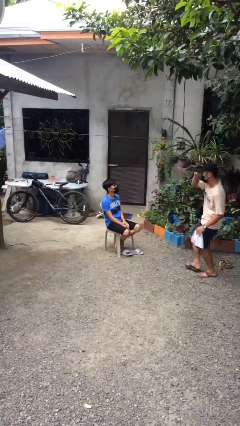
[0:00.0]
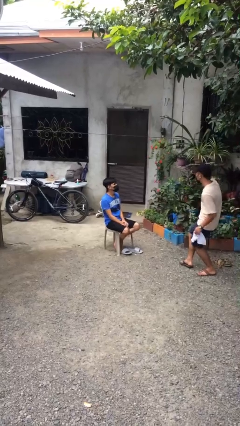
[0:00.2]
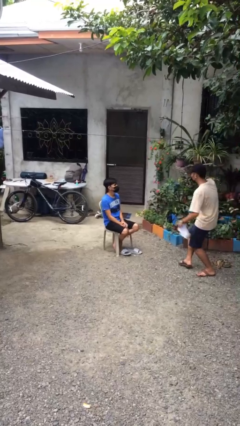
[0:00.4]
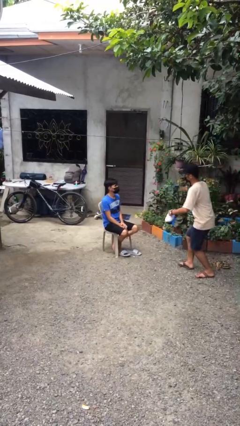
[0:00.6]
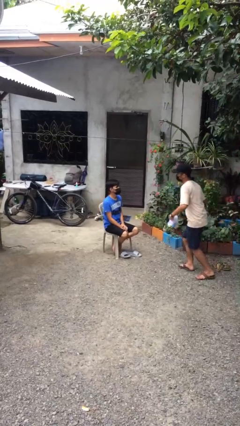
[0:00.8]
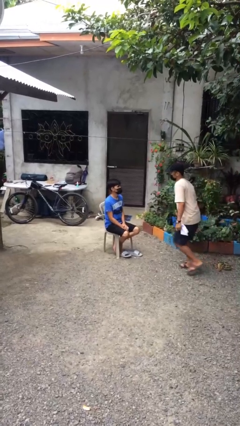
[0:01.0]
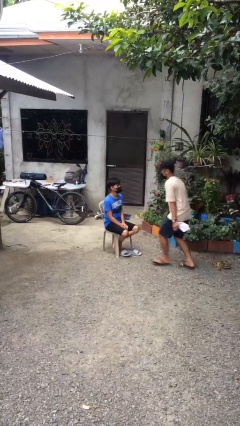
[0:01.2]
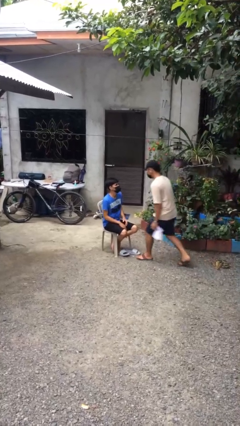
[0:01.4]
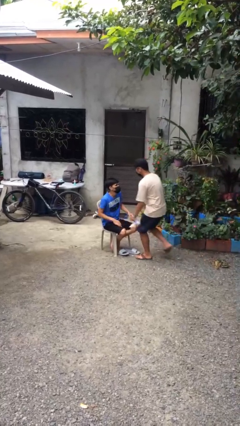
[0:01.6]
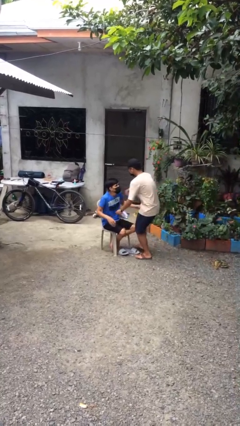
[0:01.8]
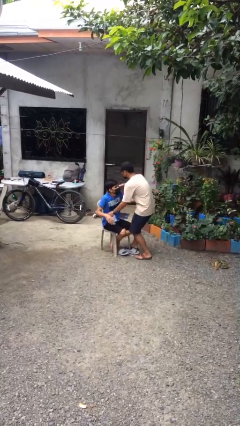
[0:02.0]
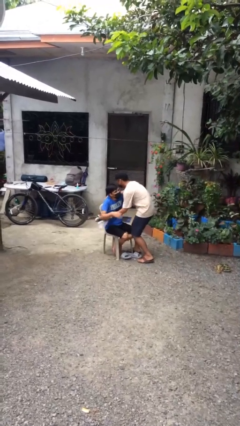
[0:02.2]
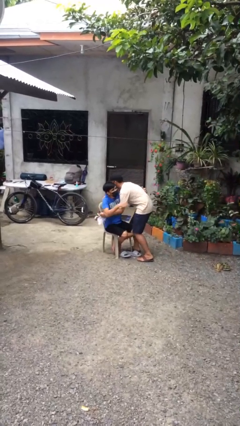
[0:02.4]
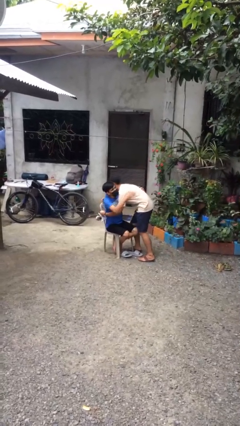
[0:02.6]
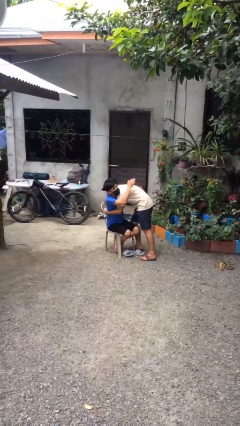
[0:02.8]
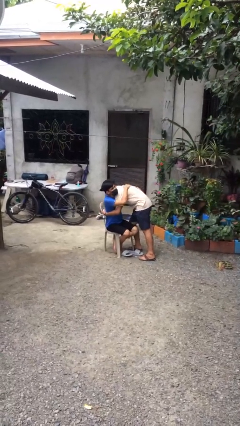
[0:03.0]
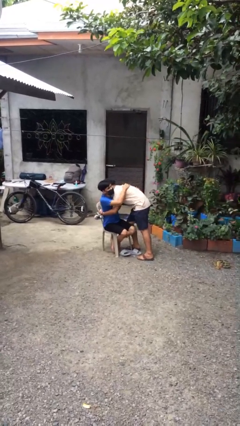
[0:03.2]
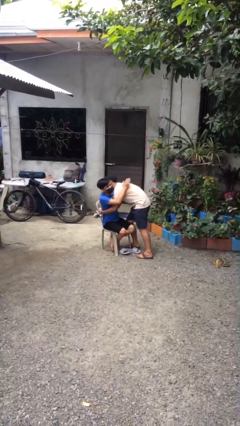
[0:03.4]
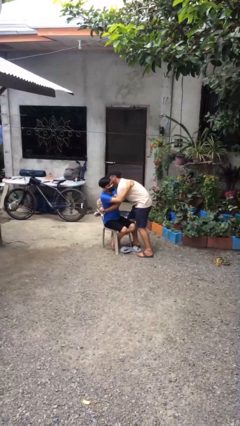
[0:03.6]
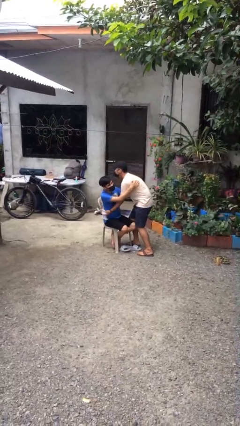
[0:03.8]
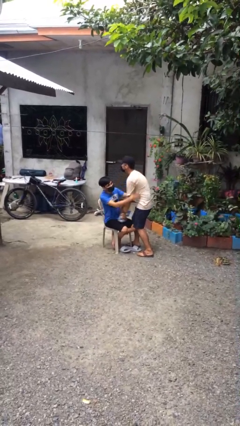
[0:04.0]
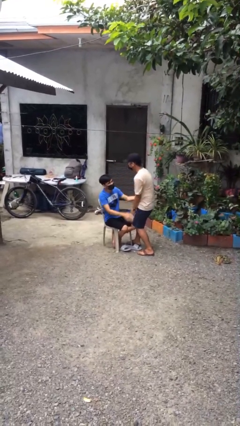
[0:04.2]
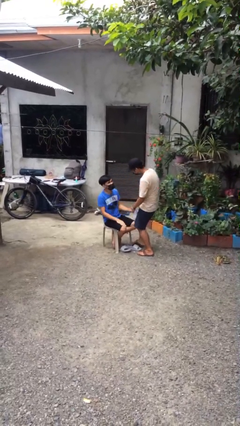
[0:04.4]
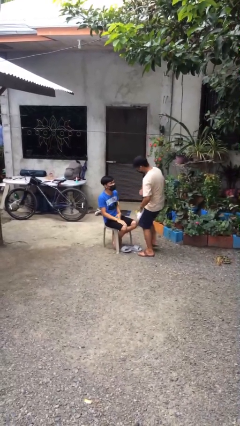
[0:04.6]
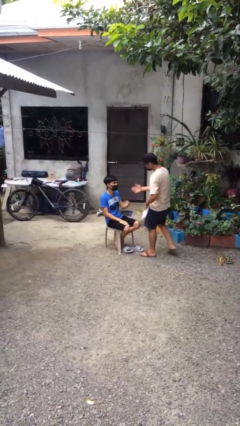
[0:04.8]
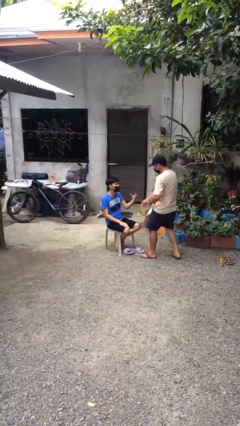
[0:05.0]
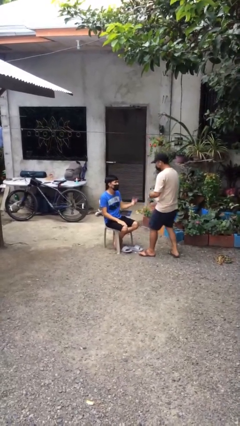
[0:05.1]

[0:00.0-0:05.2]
person embraces person

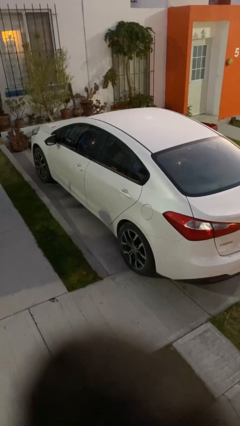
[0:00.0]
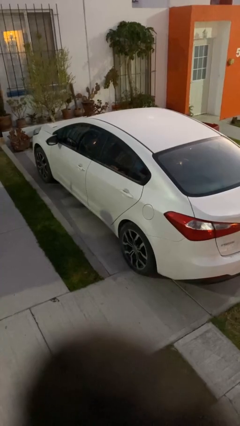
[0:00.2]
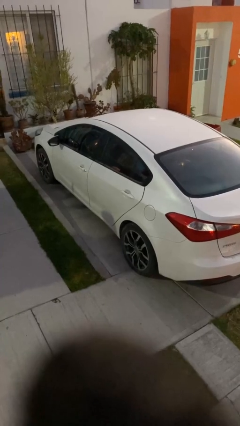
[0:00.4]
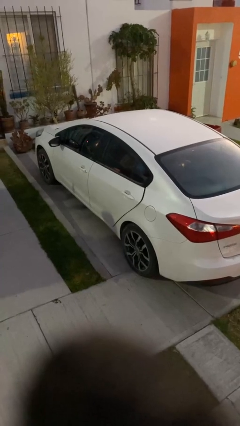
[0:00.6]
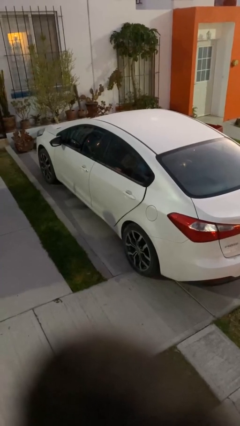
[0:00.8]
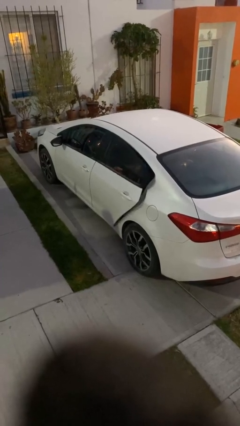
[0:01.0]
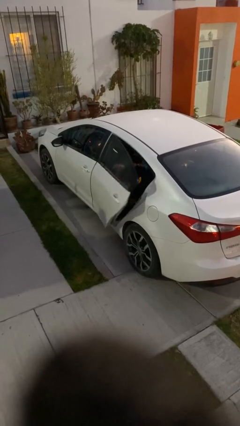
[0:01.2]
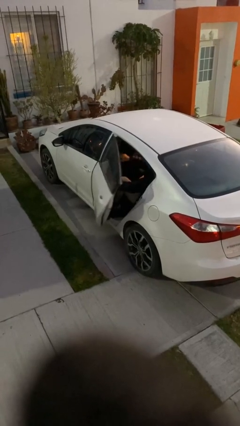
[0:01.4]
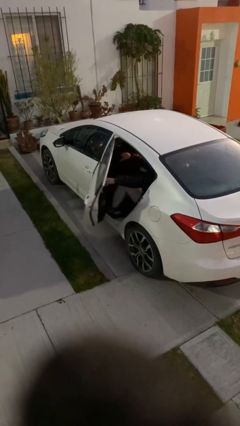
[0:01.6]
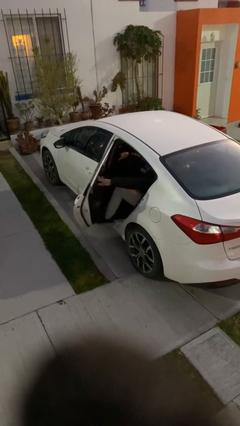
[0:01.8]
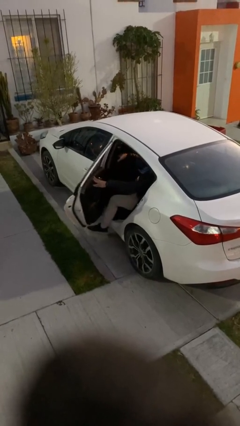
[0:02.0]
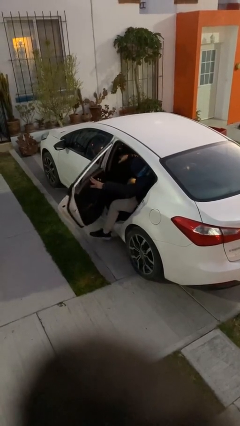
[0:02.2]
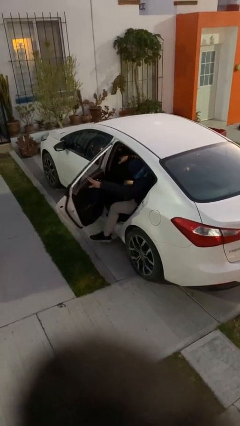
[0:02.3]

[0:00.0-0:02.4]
person opens car door

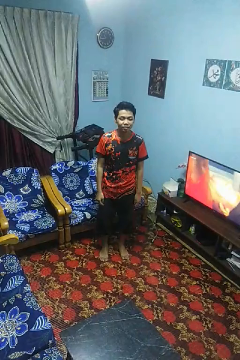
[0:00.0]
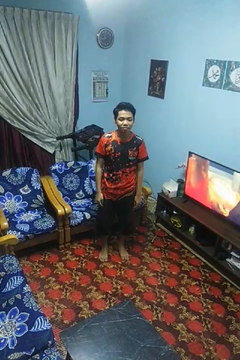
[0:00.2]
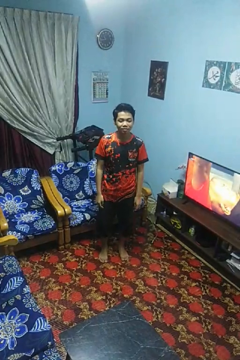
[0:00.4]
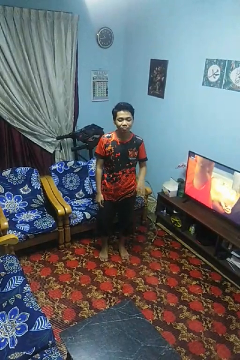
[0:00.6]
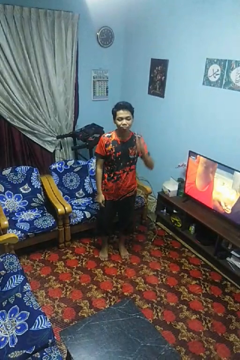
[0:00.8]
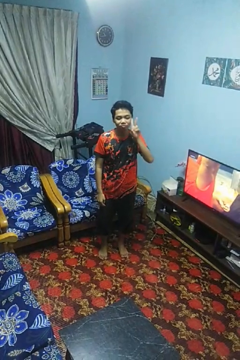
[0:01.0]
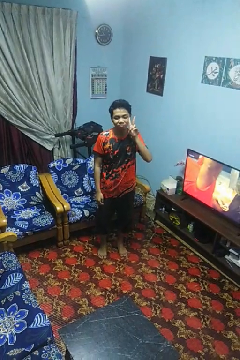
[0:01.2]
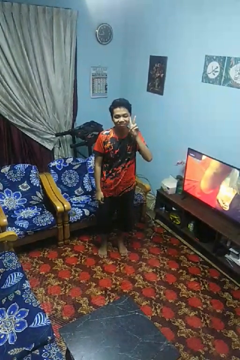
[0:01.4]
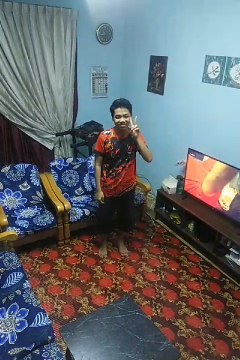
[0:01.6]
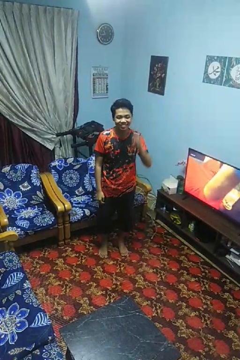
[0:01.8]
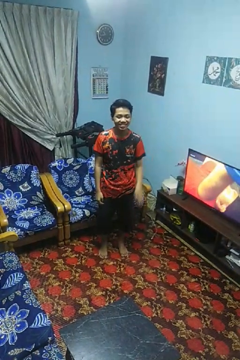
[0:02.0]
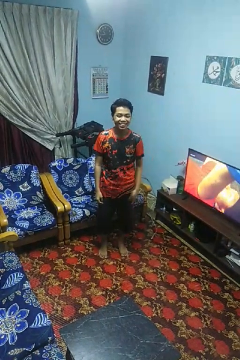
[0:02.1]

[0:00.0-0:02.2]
person gestures peace

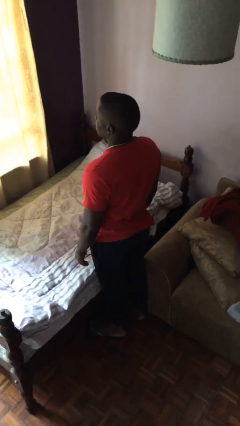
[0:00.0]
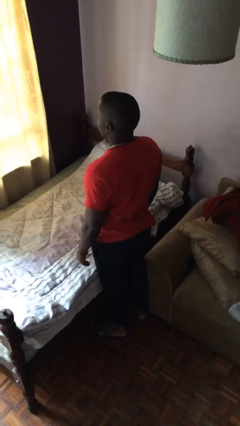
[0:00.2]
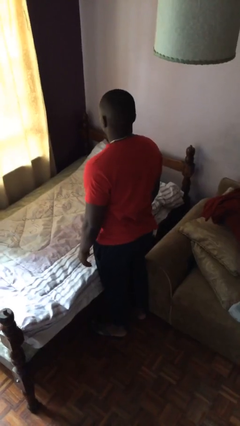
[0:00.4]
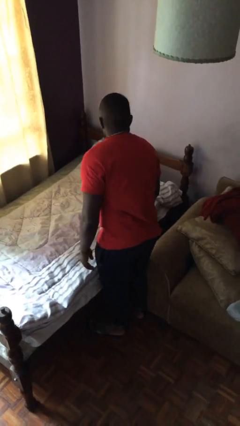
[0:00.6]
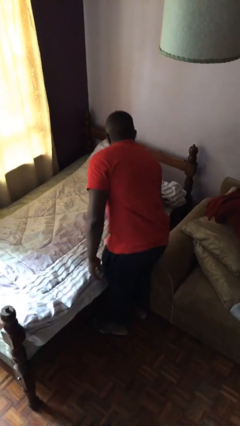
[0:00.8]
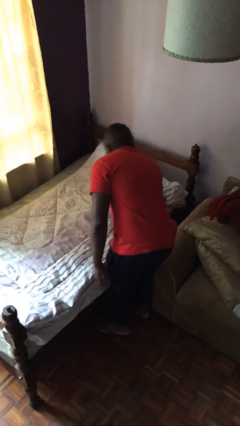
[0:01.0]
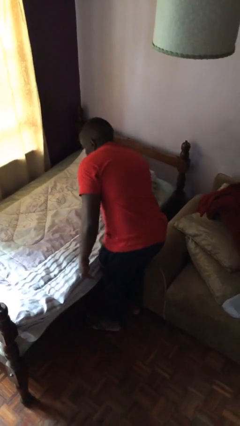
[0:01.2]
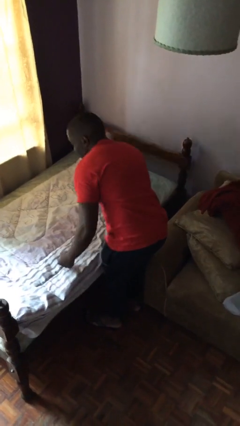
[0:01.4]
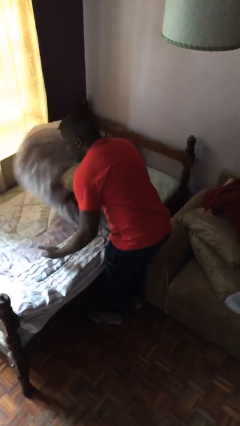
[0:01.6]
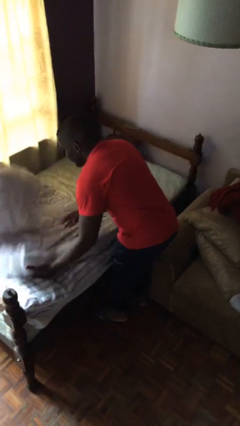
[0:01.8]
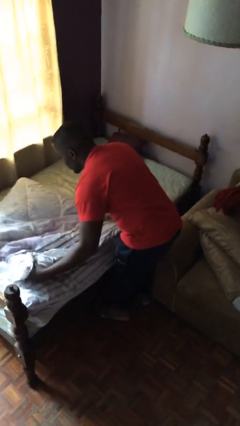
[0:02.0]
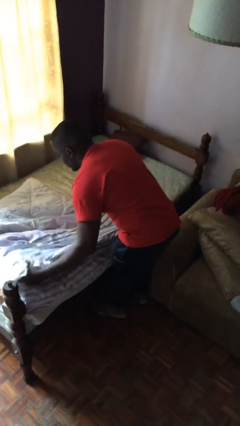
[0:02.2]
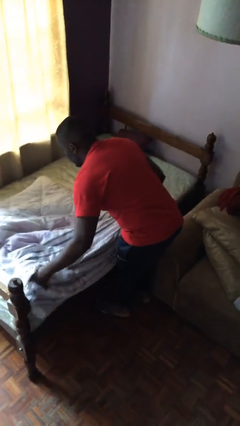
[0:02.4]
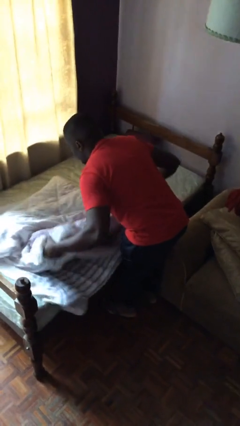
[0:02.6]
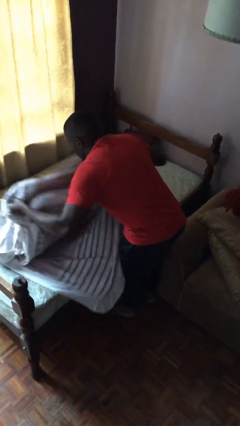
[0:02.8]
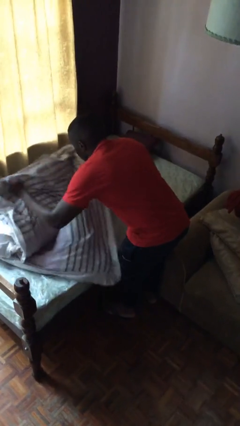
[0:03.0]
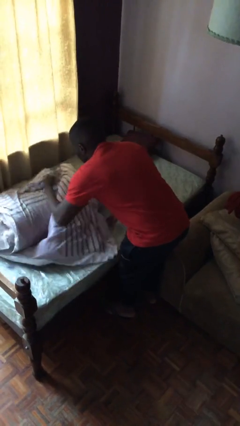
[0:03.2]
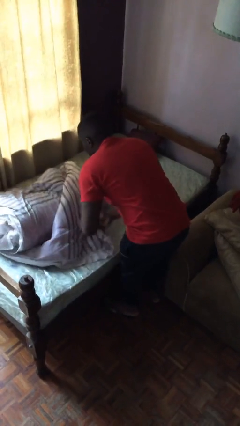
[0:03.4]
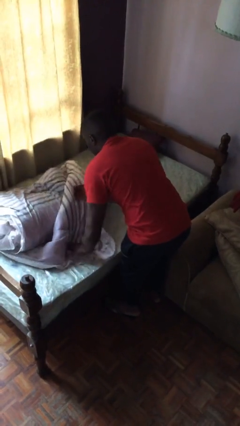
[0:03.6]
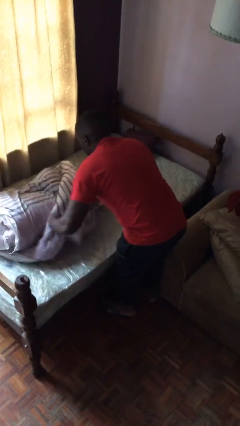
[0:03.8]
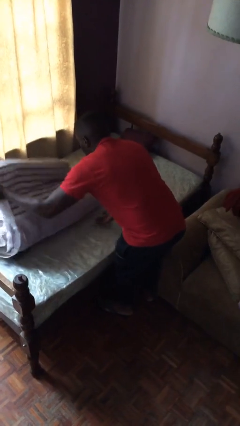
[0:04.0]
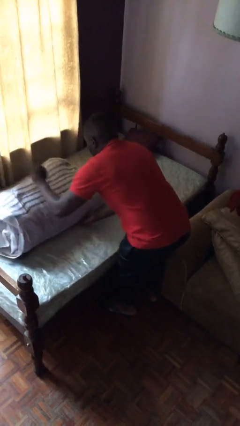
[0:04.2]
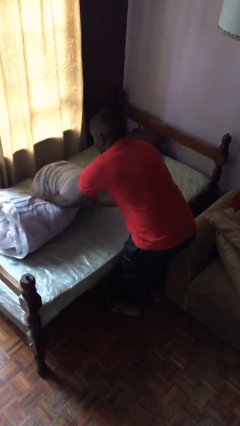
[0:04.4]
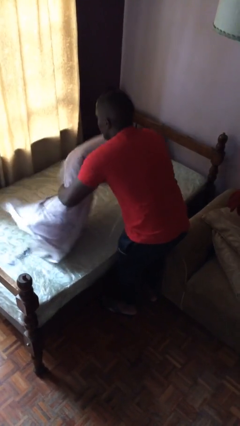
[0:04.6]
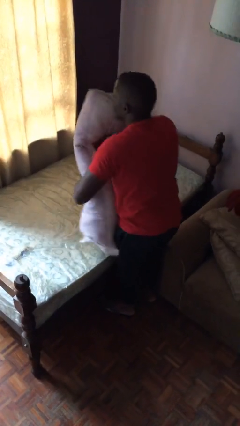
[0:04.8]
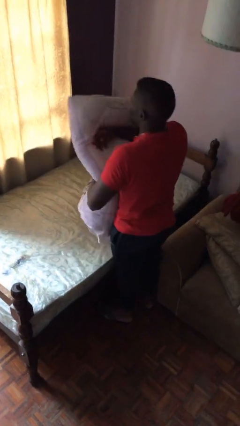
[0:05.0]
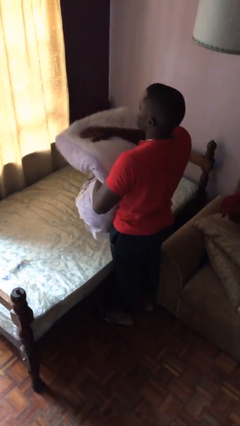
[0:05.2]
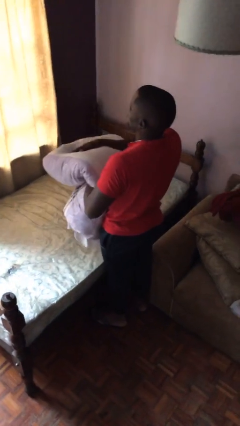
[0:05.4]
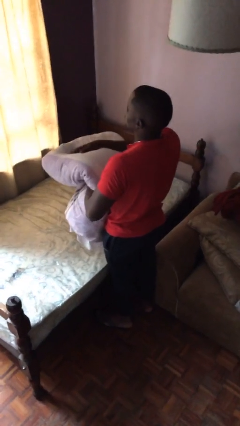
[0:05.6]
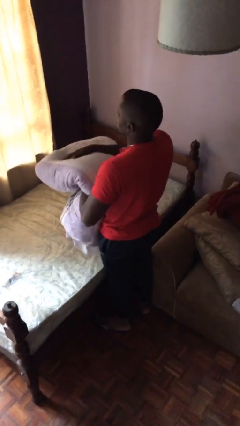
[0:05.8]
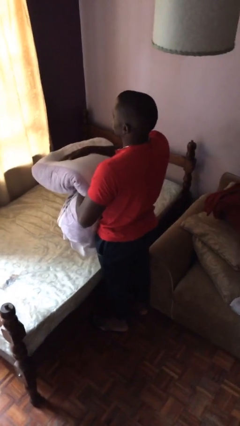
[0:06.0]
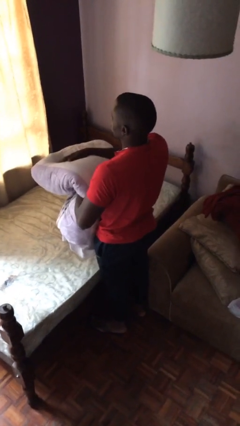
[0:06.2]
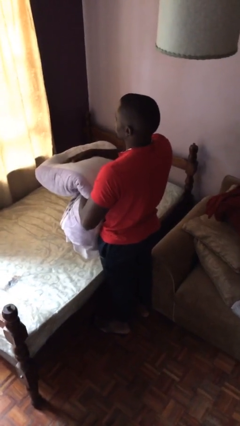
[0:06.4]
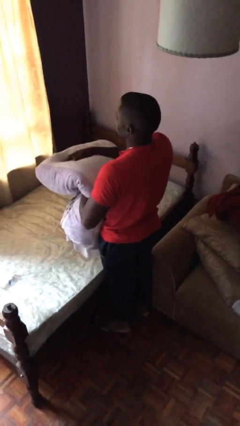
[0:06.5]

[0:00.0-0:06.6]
person folds blanket

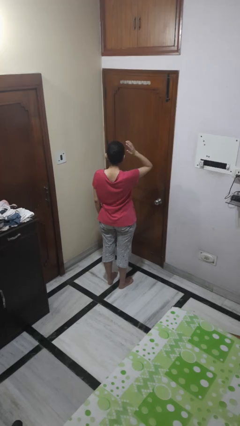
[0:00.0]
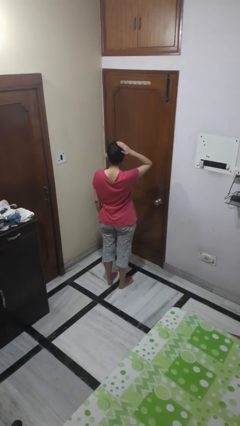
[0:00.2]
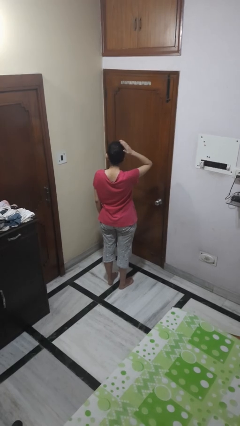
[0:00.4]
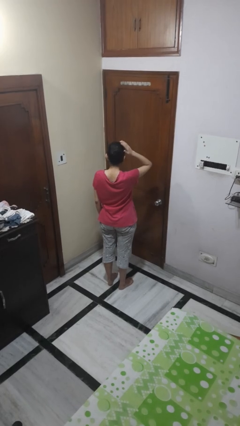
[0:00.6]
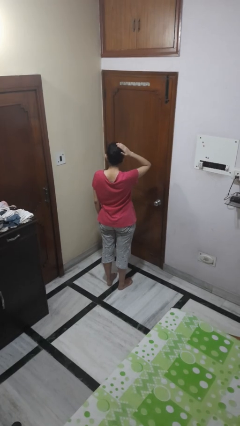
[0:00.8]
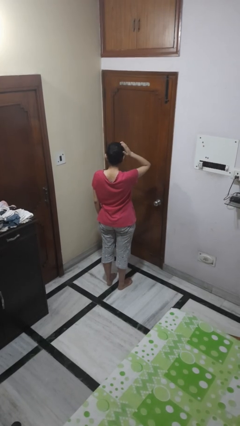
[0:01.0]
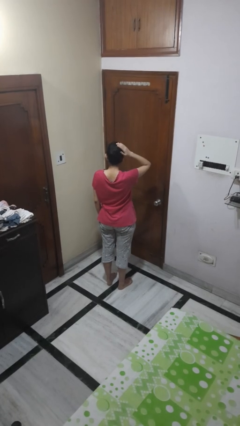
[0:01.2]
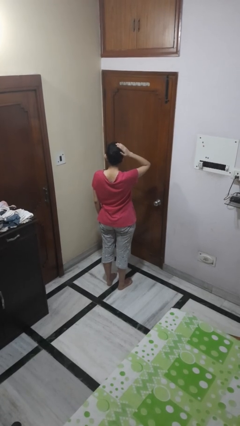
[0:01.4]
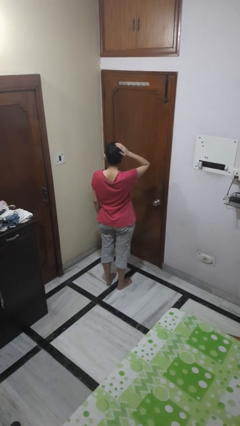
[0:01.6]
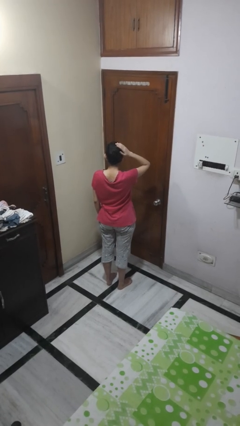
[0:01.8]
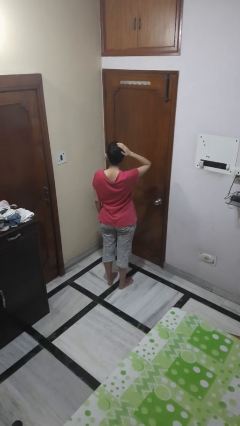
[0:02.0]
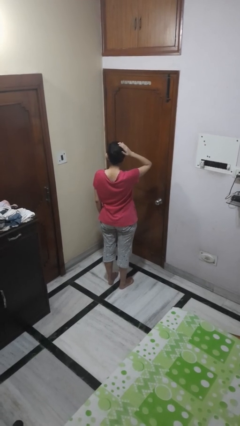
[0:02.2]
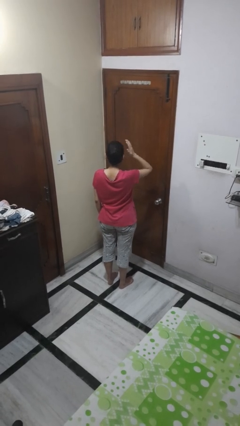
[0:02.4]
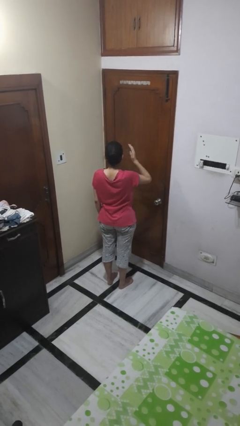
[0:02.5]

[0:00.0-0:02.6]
person pats head
